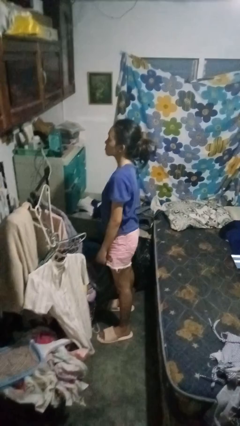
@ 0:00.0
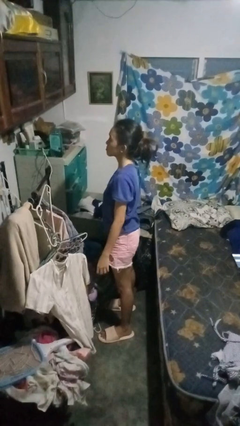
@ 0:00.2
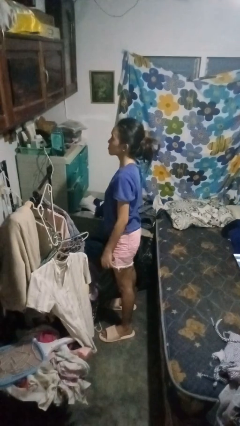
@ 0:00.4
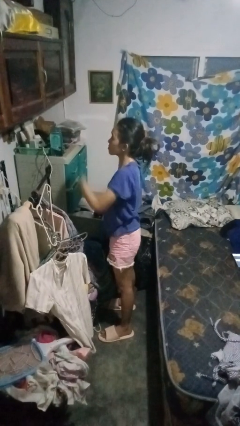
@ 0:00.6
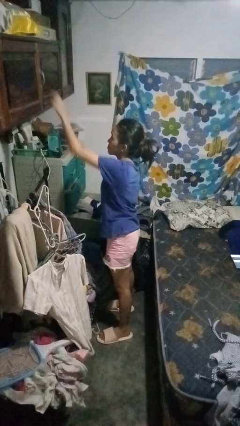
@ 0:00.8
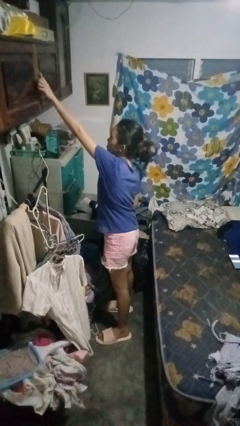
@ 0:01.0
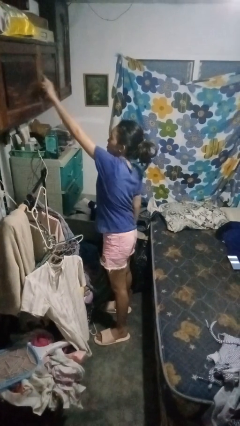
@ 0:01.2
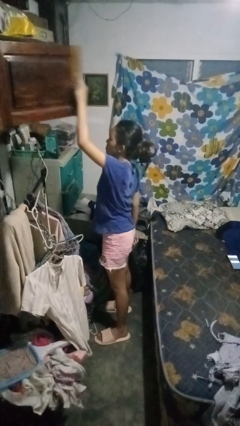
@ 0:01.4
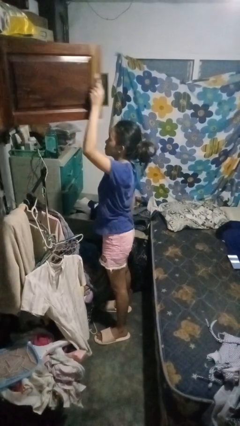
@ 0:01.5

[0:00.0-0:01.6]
person opens closet door

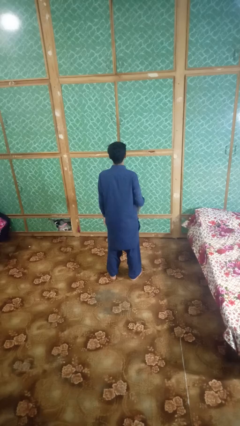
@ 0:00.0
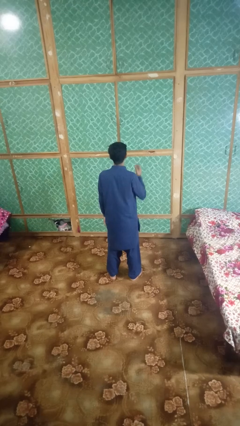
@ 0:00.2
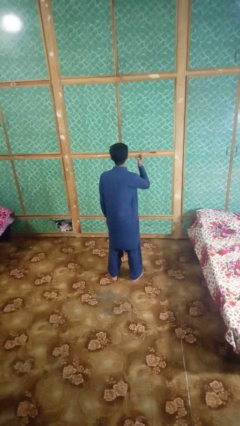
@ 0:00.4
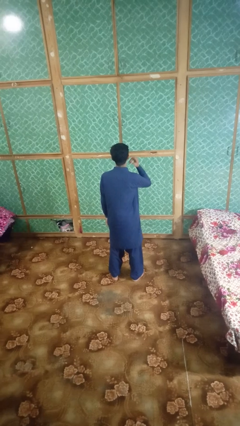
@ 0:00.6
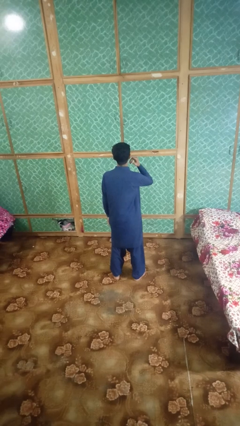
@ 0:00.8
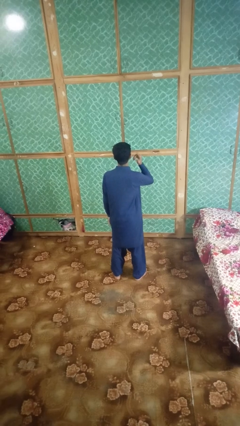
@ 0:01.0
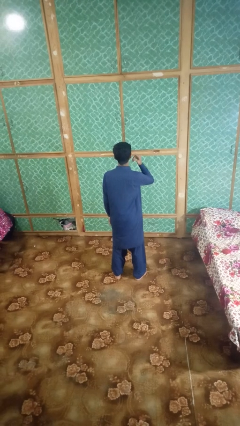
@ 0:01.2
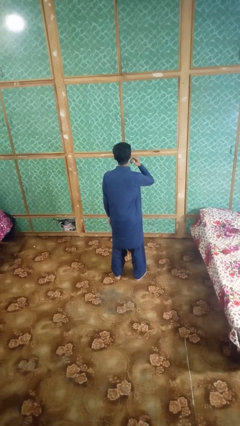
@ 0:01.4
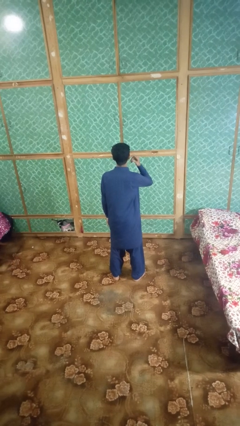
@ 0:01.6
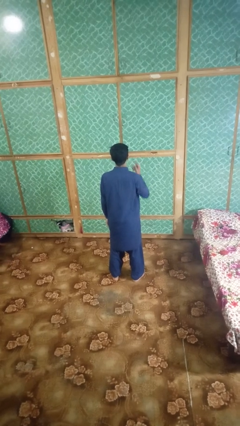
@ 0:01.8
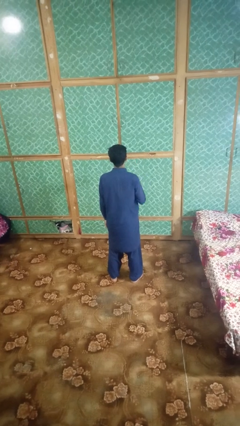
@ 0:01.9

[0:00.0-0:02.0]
person gestures listen closely

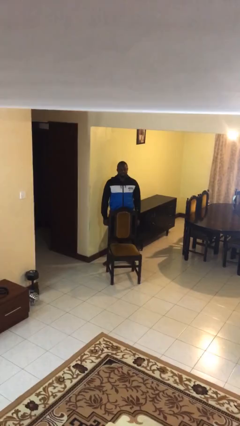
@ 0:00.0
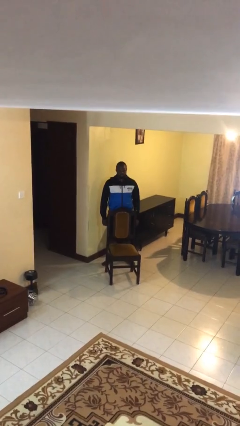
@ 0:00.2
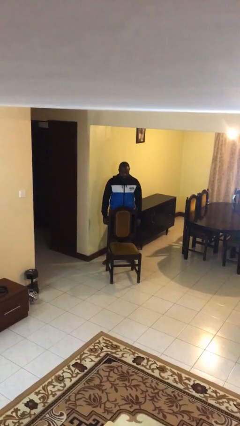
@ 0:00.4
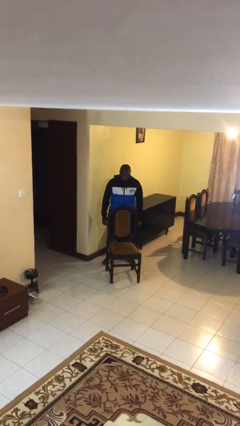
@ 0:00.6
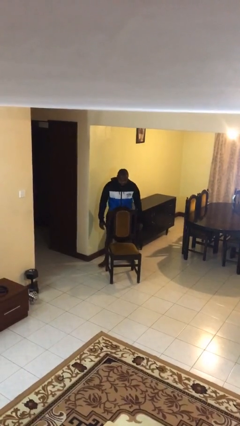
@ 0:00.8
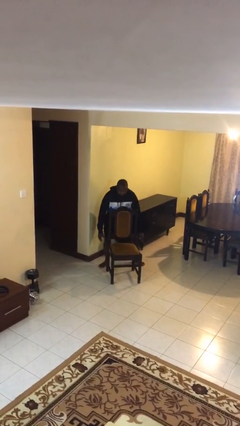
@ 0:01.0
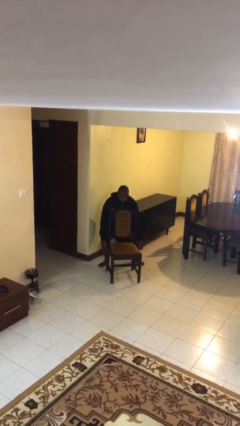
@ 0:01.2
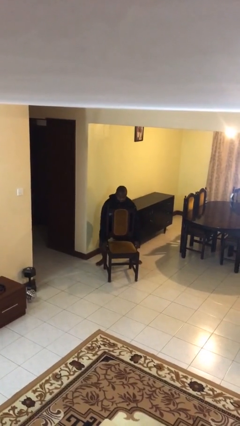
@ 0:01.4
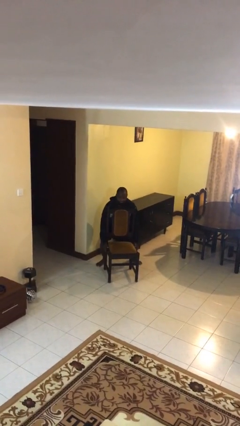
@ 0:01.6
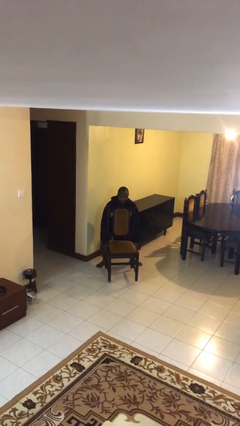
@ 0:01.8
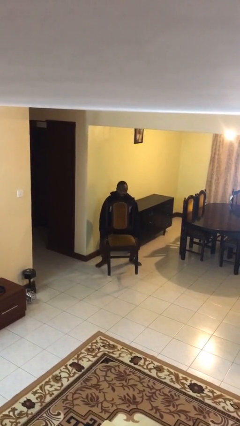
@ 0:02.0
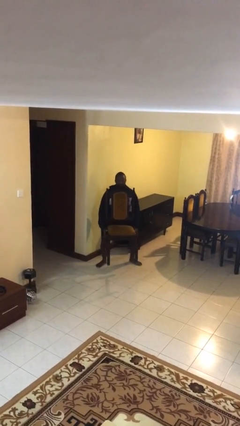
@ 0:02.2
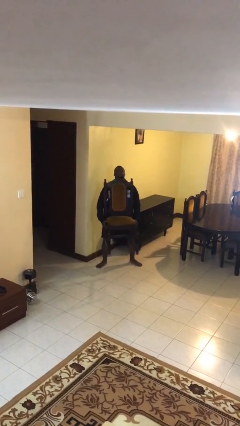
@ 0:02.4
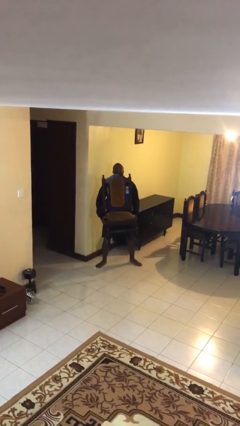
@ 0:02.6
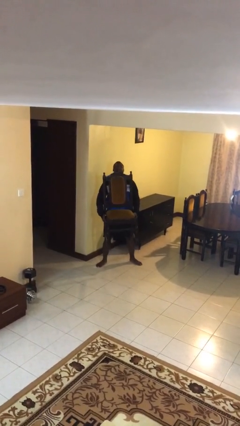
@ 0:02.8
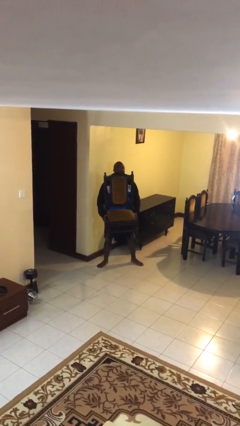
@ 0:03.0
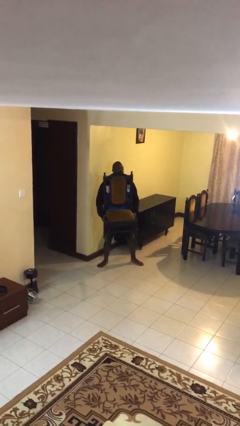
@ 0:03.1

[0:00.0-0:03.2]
person picks up object from floor

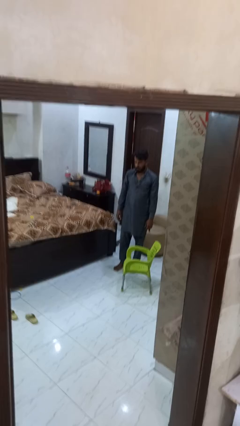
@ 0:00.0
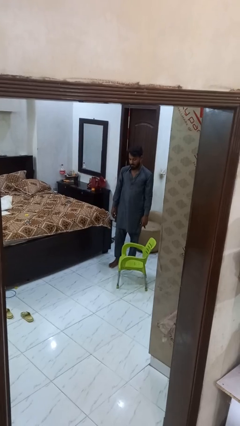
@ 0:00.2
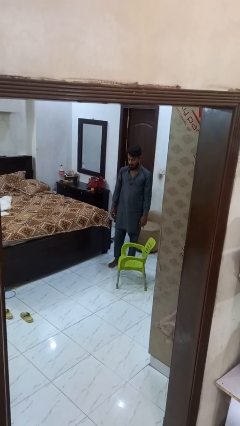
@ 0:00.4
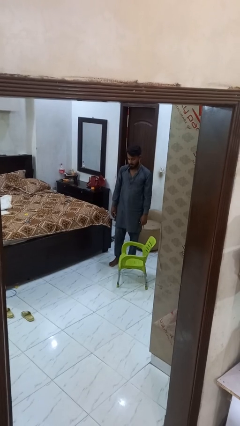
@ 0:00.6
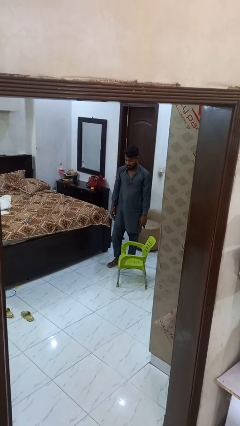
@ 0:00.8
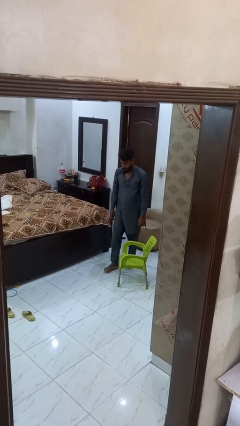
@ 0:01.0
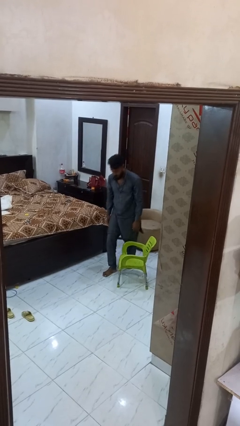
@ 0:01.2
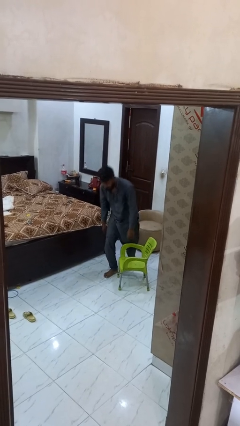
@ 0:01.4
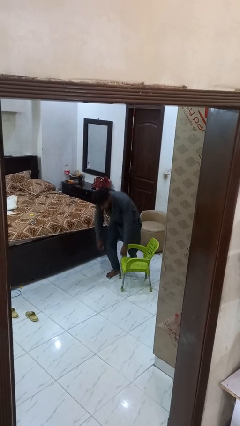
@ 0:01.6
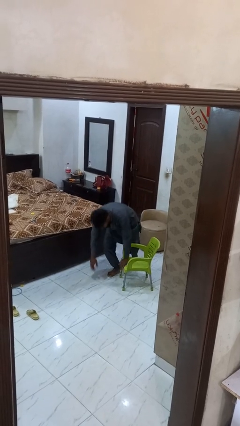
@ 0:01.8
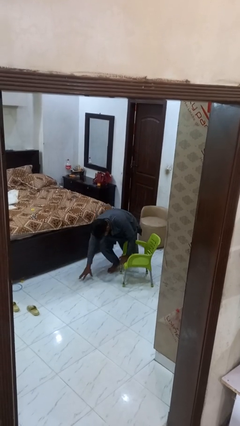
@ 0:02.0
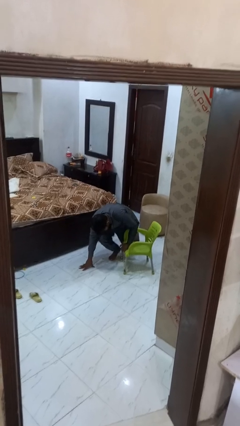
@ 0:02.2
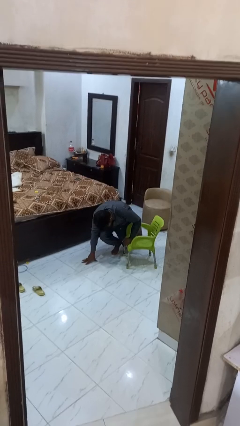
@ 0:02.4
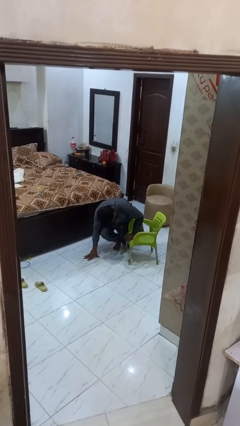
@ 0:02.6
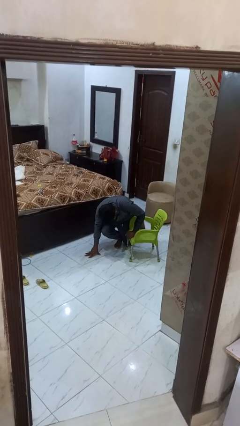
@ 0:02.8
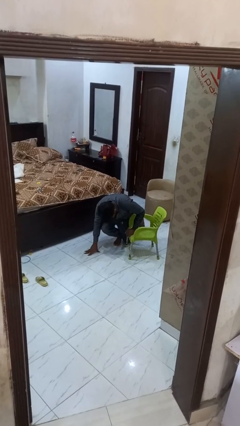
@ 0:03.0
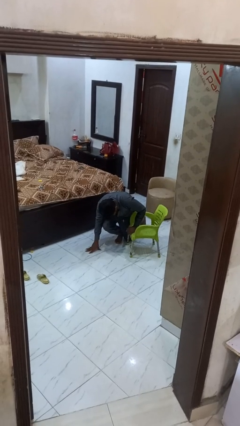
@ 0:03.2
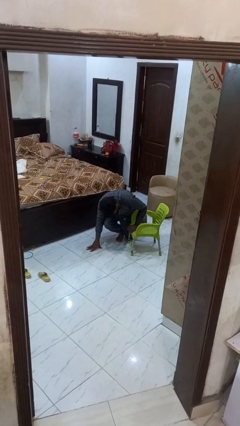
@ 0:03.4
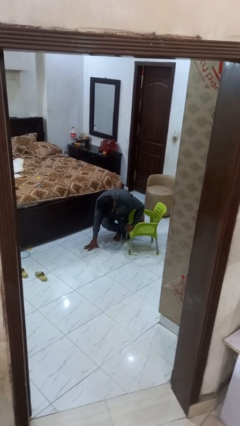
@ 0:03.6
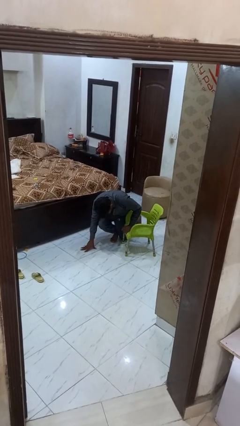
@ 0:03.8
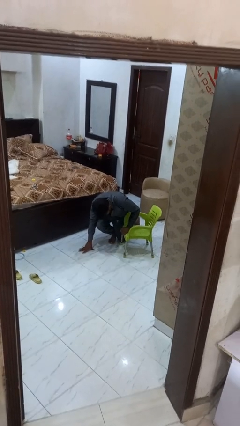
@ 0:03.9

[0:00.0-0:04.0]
person trips on object on floor

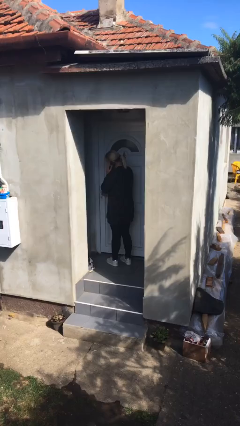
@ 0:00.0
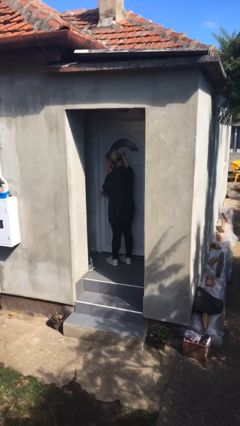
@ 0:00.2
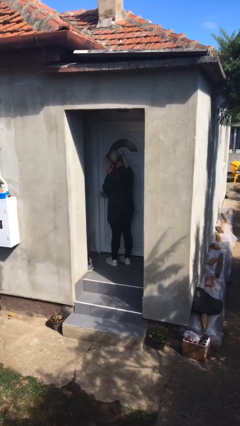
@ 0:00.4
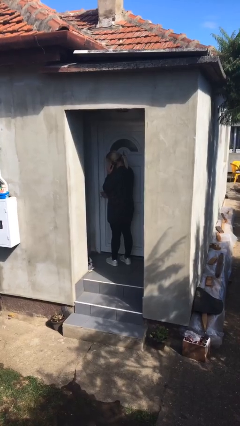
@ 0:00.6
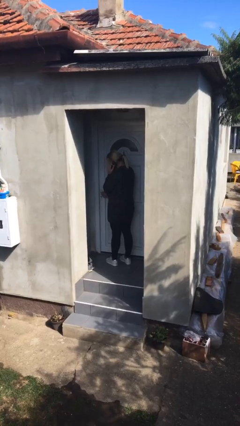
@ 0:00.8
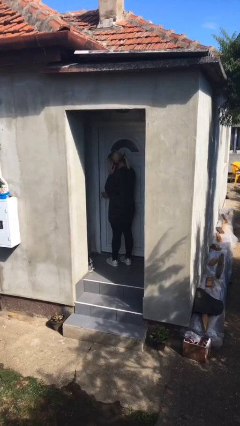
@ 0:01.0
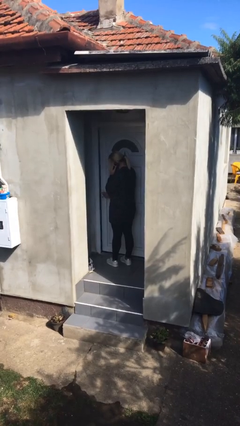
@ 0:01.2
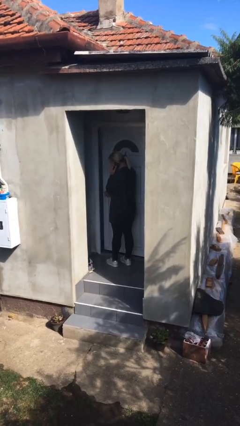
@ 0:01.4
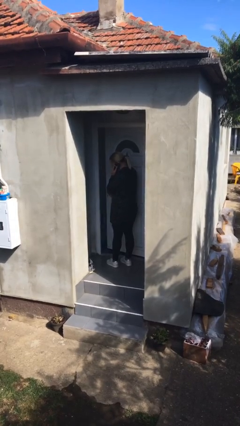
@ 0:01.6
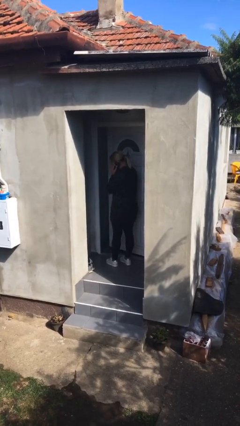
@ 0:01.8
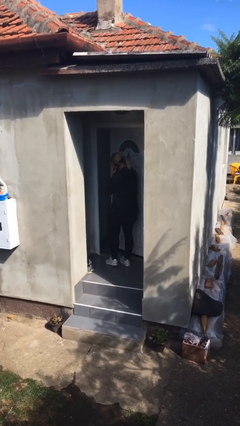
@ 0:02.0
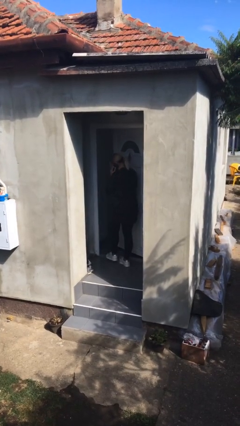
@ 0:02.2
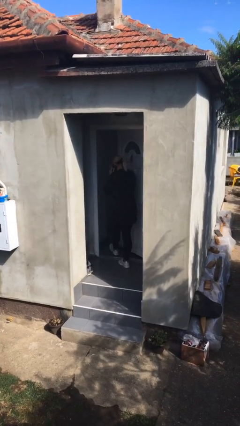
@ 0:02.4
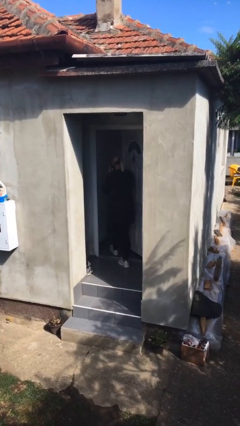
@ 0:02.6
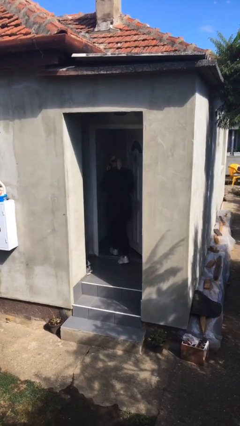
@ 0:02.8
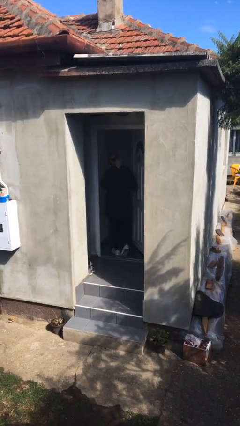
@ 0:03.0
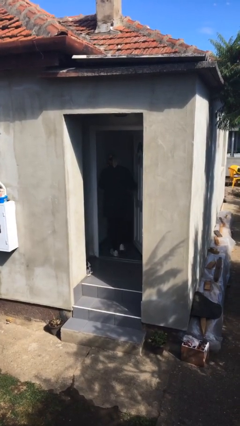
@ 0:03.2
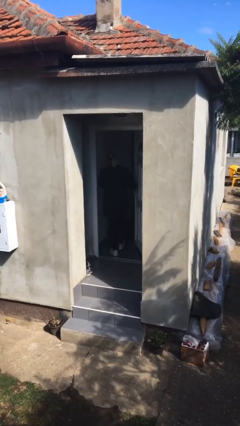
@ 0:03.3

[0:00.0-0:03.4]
person opens facility door

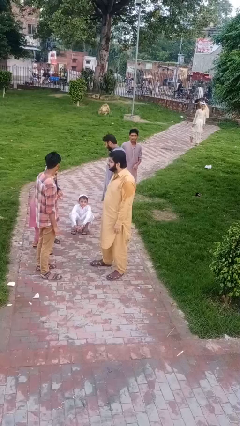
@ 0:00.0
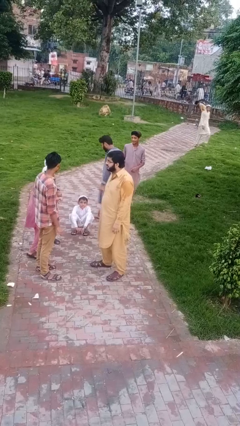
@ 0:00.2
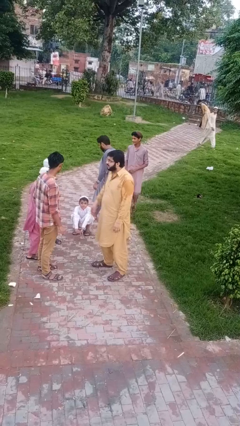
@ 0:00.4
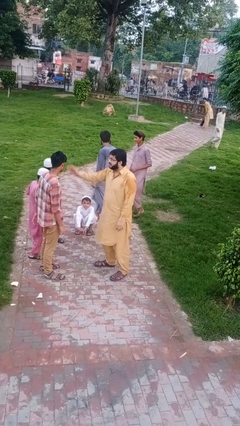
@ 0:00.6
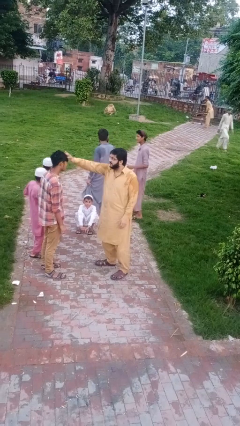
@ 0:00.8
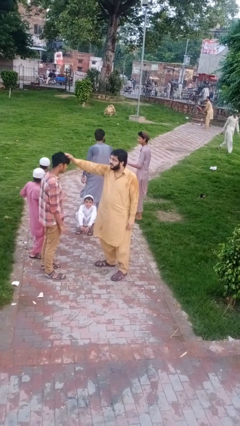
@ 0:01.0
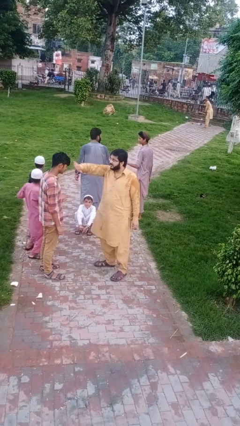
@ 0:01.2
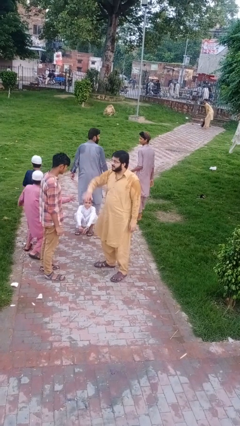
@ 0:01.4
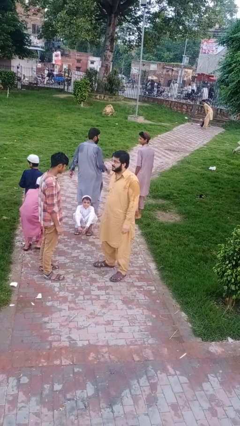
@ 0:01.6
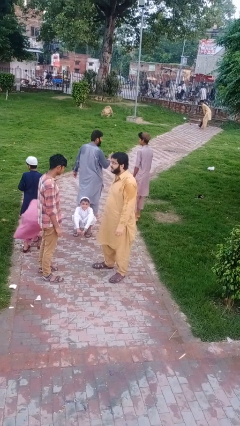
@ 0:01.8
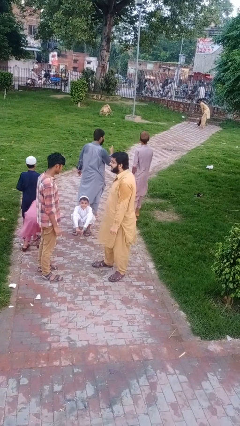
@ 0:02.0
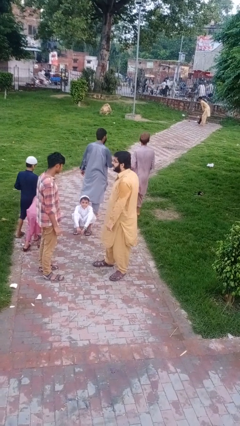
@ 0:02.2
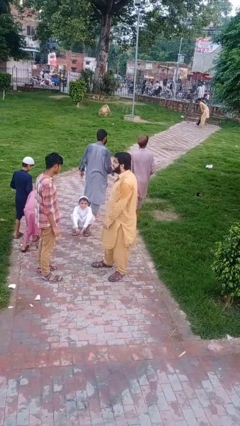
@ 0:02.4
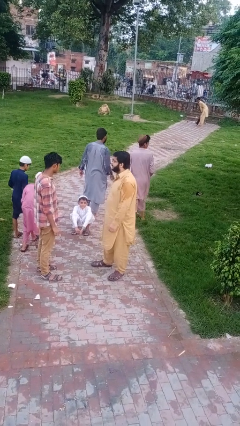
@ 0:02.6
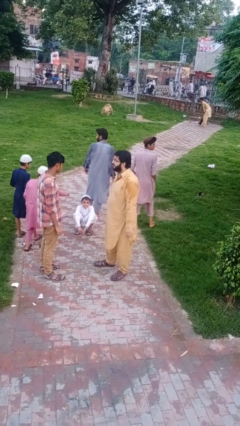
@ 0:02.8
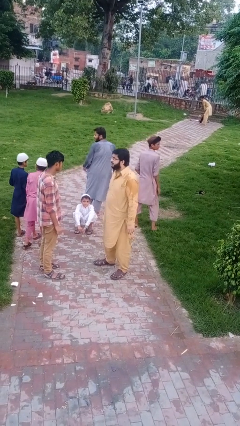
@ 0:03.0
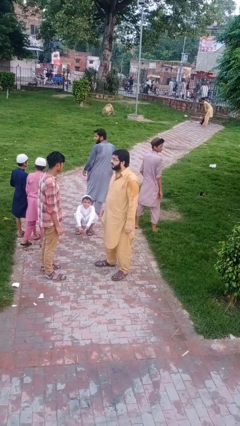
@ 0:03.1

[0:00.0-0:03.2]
person grabs person by hair
